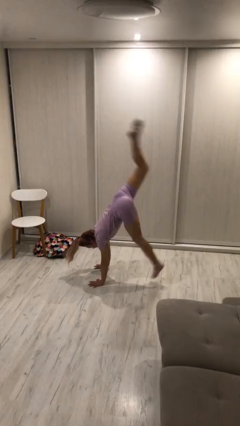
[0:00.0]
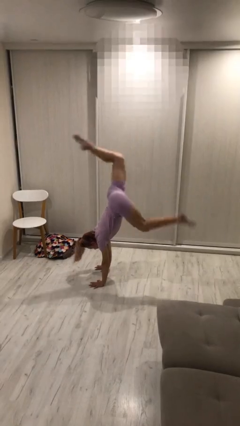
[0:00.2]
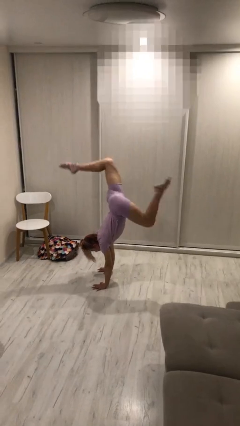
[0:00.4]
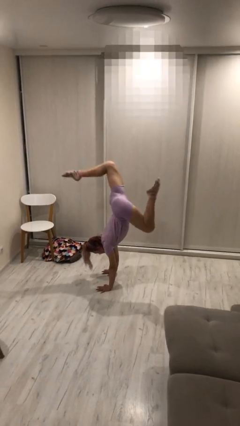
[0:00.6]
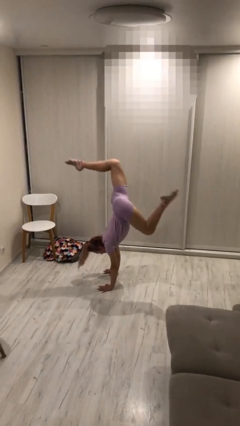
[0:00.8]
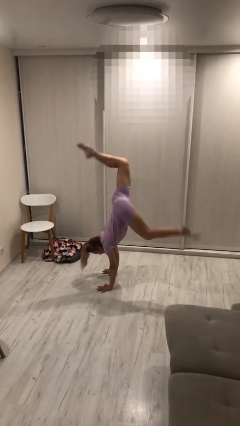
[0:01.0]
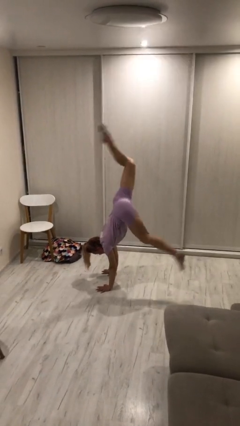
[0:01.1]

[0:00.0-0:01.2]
person handstand

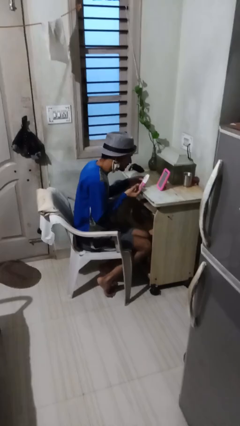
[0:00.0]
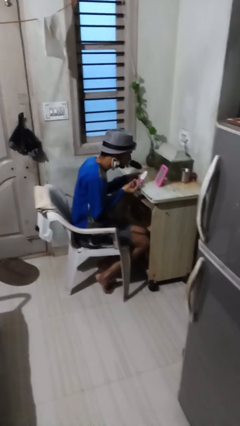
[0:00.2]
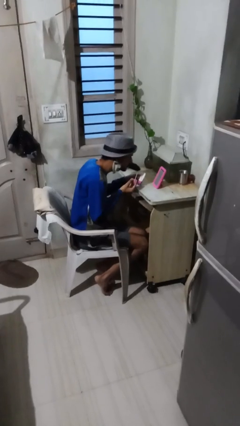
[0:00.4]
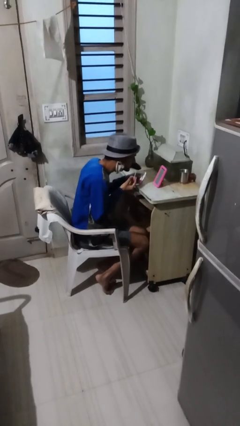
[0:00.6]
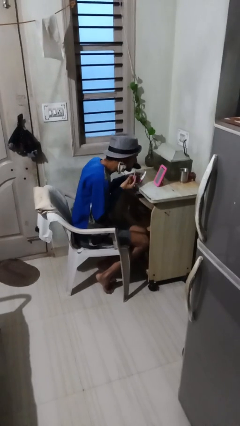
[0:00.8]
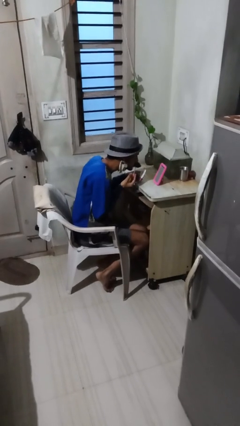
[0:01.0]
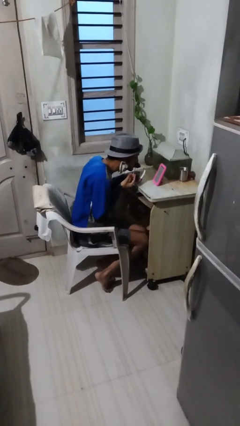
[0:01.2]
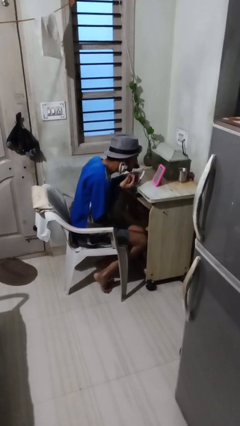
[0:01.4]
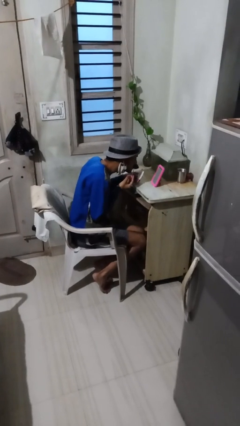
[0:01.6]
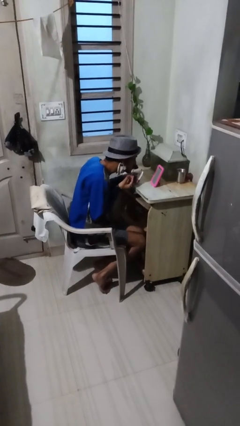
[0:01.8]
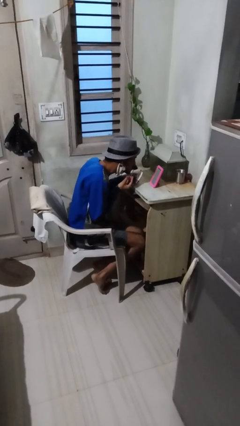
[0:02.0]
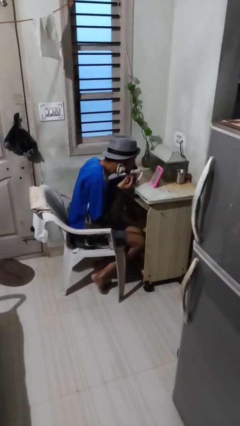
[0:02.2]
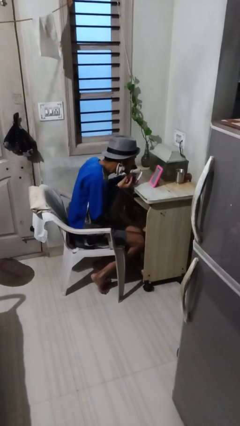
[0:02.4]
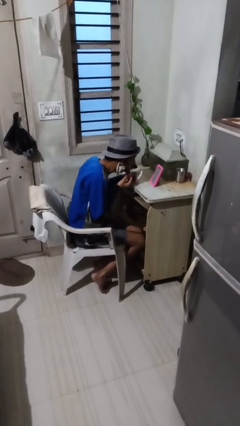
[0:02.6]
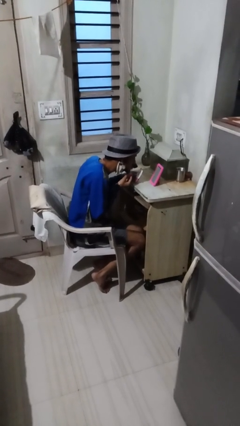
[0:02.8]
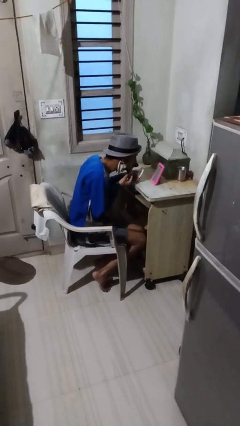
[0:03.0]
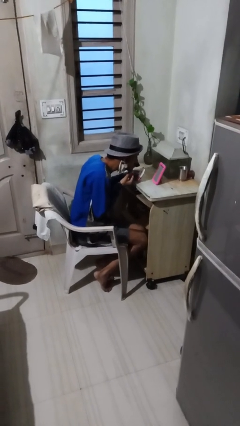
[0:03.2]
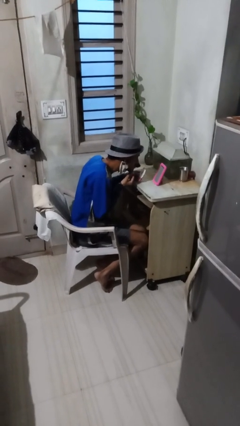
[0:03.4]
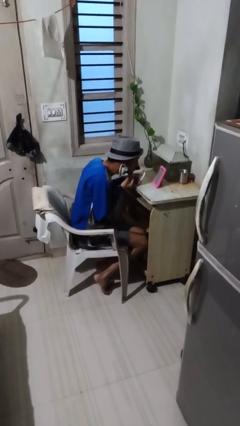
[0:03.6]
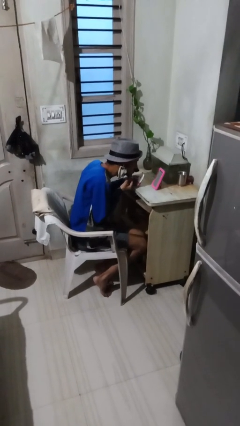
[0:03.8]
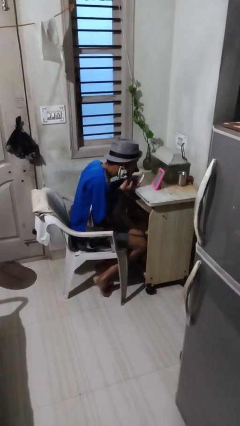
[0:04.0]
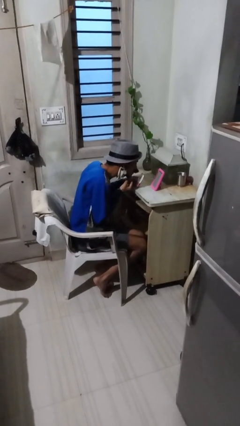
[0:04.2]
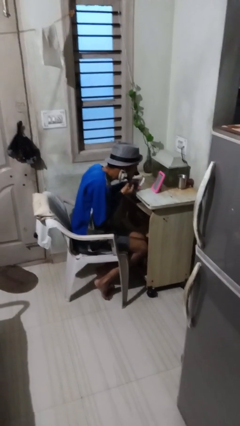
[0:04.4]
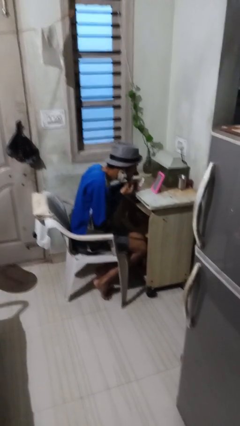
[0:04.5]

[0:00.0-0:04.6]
person applies lip makeup

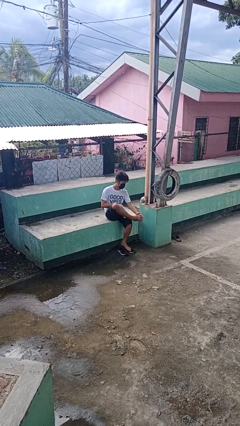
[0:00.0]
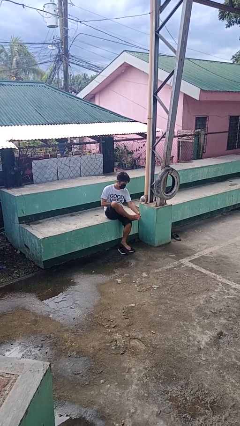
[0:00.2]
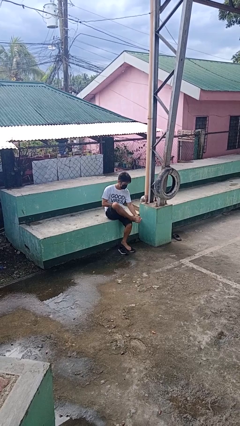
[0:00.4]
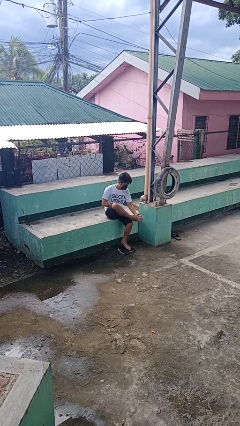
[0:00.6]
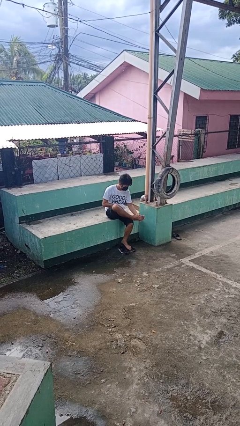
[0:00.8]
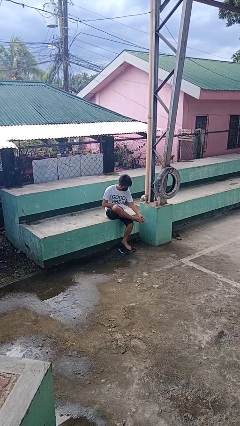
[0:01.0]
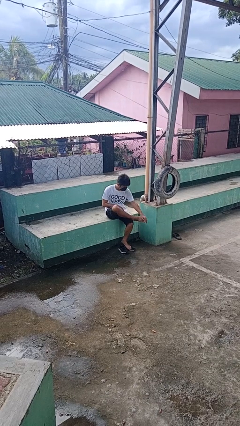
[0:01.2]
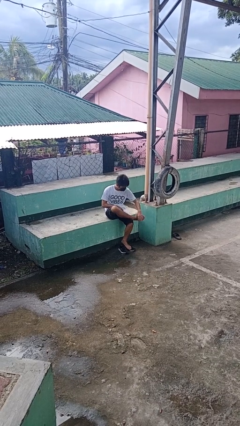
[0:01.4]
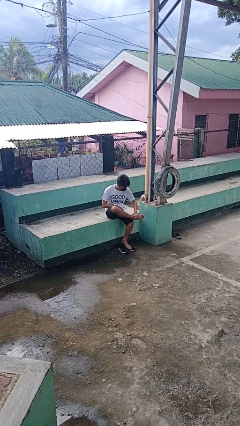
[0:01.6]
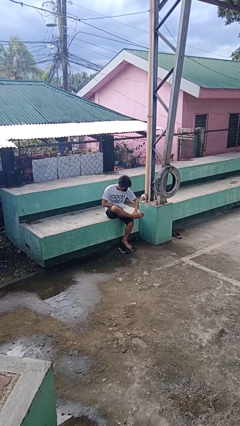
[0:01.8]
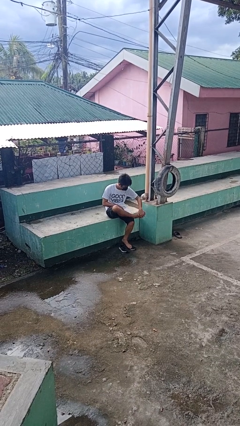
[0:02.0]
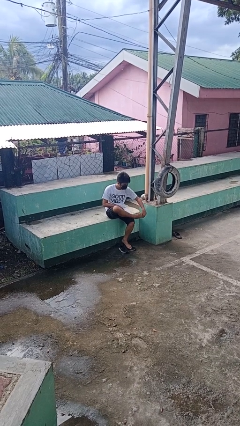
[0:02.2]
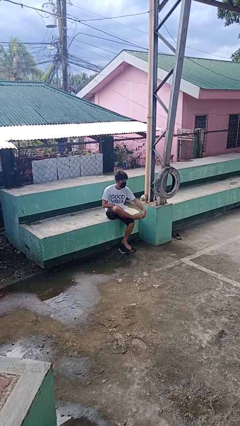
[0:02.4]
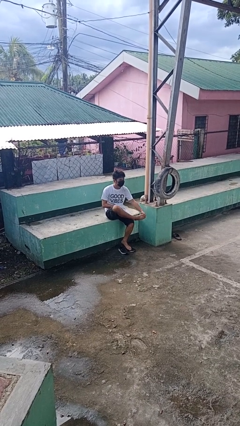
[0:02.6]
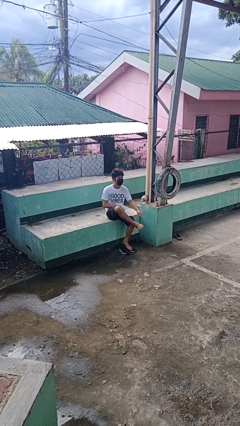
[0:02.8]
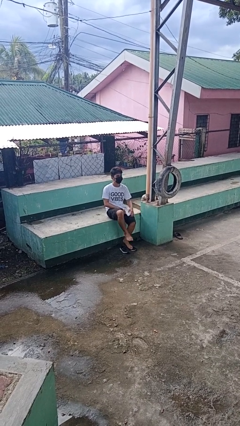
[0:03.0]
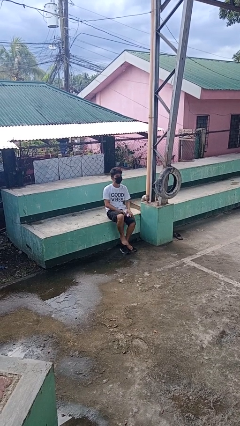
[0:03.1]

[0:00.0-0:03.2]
person rubs foot

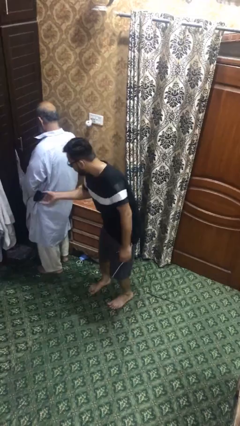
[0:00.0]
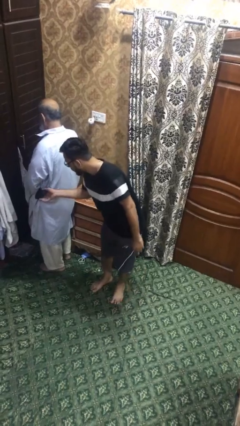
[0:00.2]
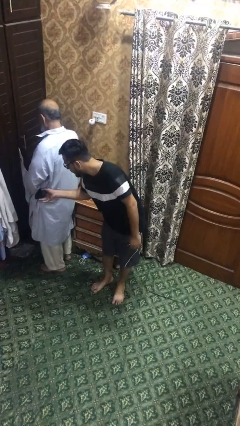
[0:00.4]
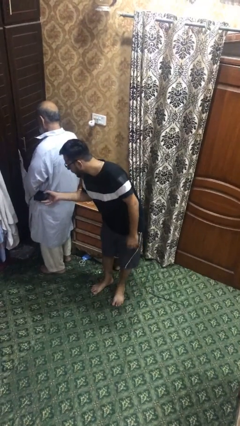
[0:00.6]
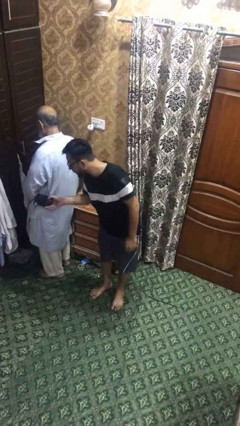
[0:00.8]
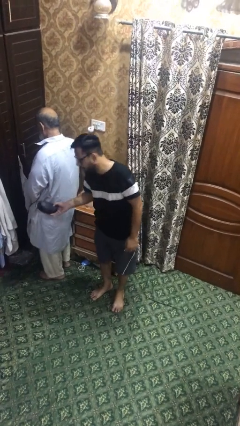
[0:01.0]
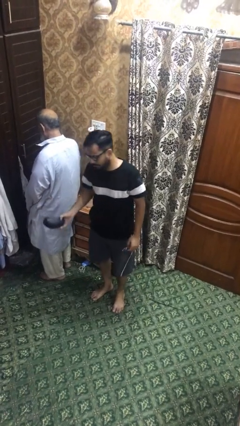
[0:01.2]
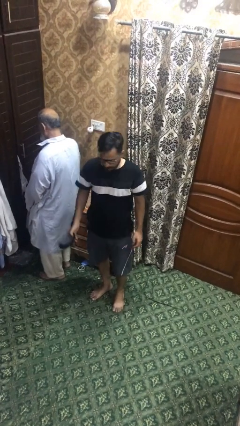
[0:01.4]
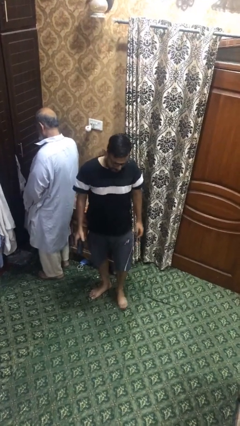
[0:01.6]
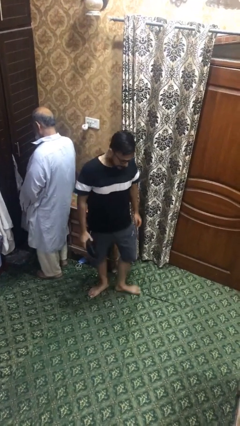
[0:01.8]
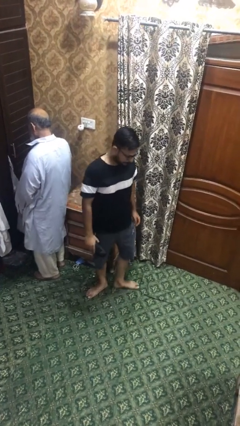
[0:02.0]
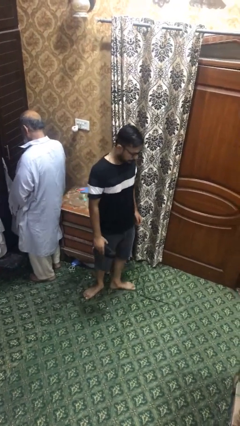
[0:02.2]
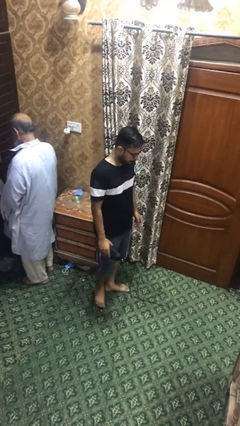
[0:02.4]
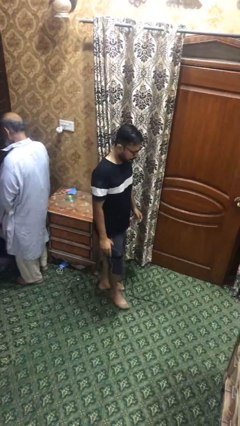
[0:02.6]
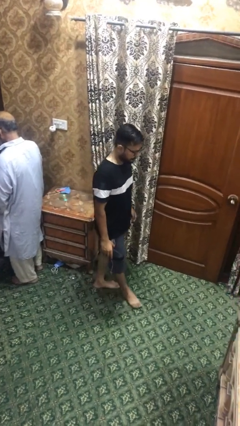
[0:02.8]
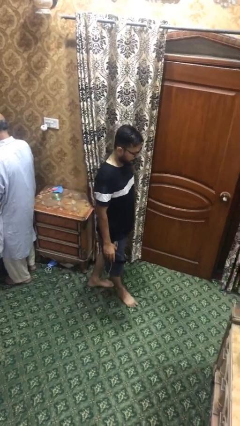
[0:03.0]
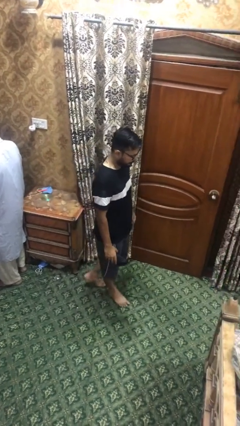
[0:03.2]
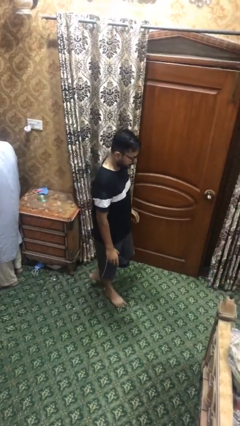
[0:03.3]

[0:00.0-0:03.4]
person steals object from person

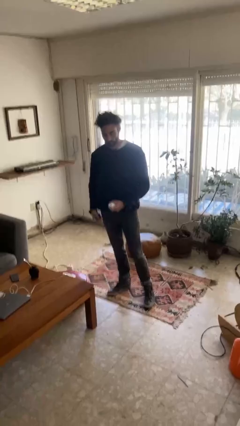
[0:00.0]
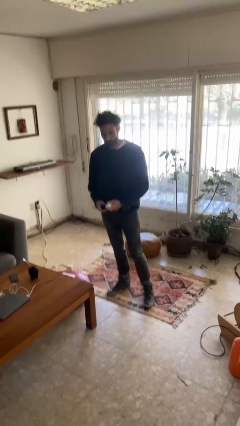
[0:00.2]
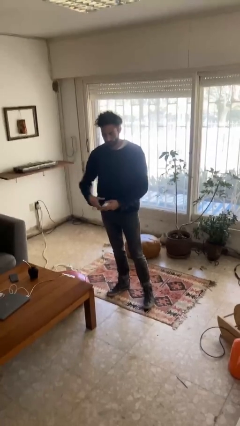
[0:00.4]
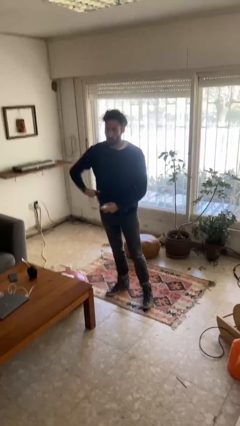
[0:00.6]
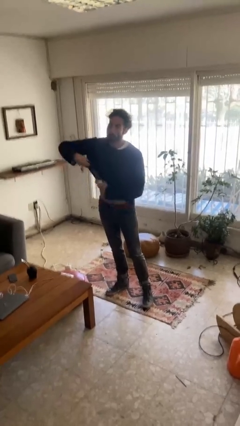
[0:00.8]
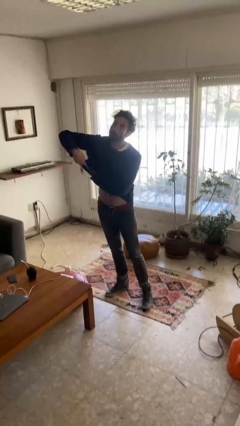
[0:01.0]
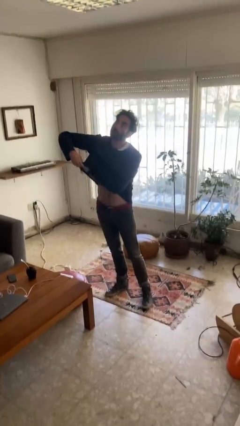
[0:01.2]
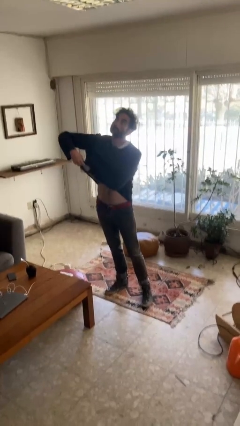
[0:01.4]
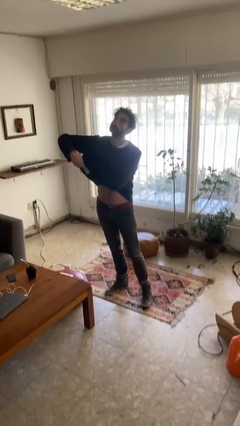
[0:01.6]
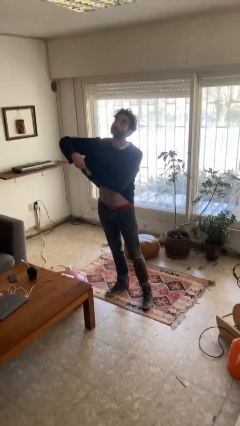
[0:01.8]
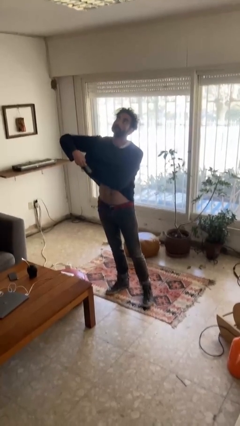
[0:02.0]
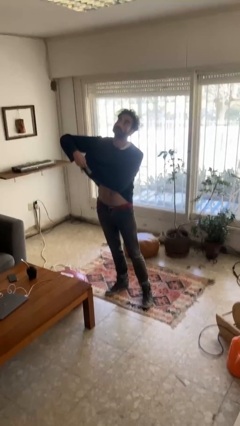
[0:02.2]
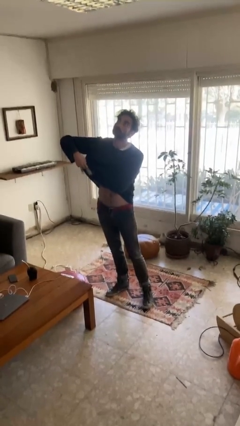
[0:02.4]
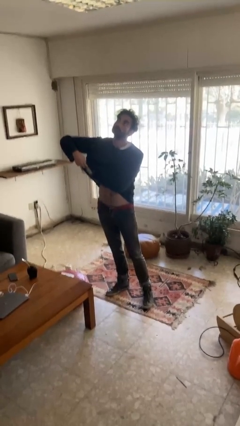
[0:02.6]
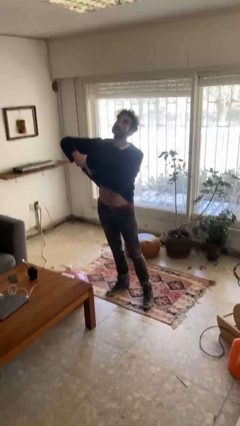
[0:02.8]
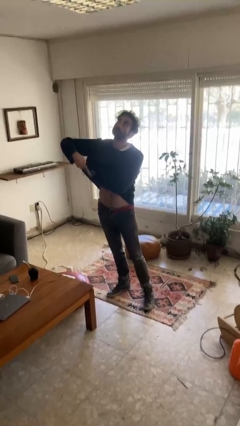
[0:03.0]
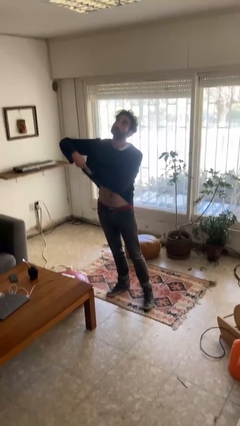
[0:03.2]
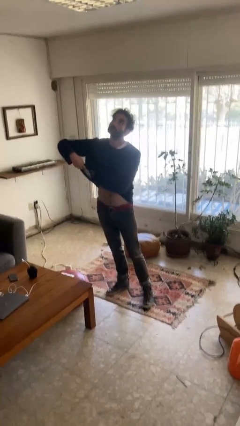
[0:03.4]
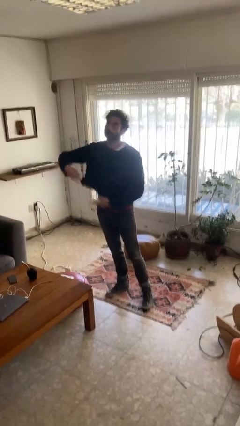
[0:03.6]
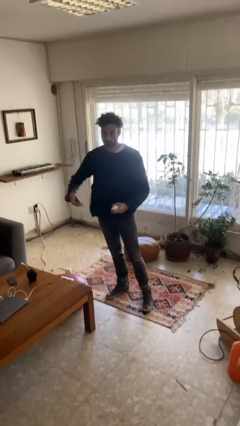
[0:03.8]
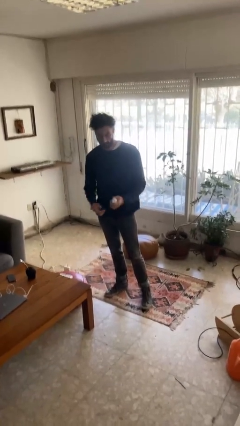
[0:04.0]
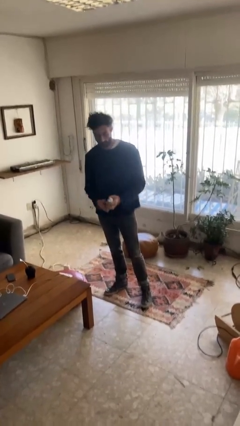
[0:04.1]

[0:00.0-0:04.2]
person applies deodorant

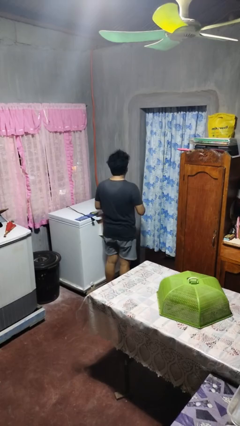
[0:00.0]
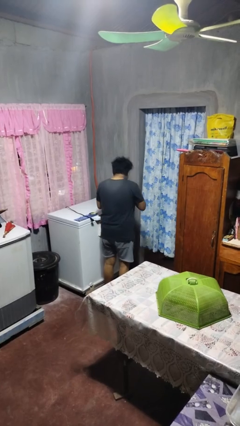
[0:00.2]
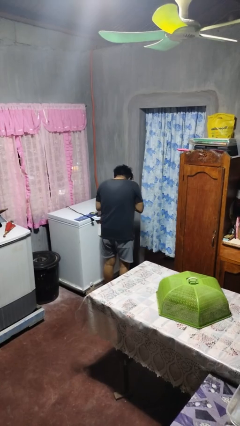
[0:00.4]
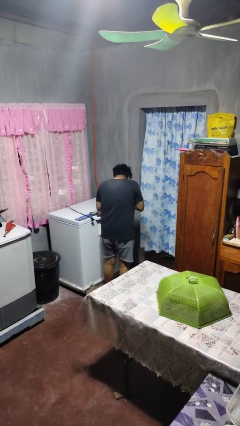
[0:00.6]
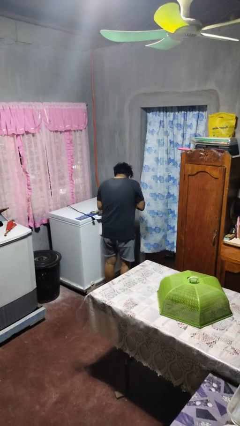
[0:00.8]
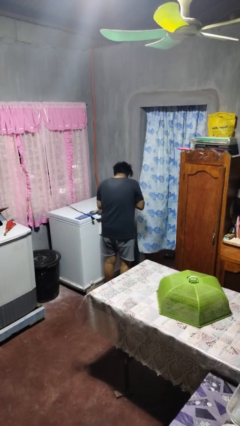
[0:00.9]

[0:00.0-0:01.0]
person sneezes into hand
